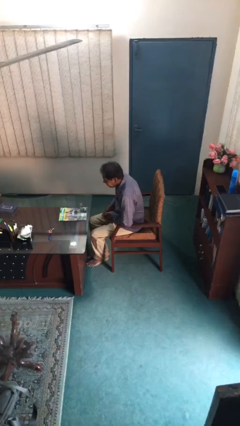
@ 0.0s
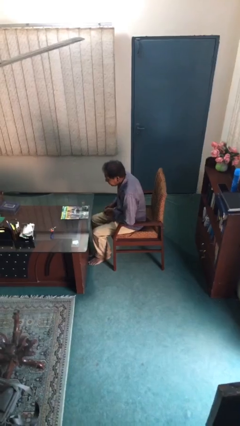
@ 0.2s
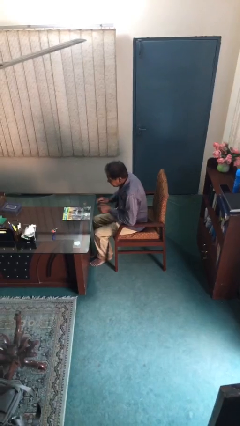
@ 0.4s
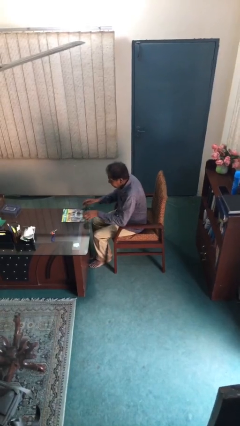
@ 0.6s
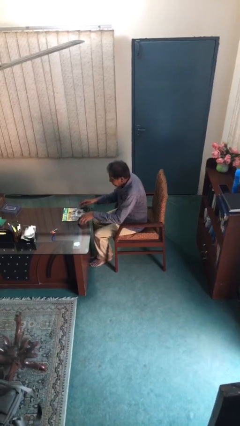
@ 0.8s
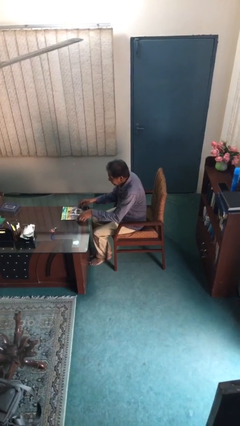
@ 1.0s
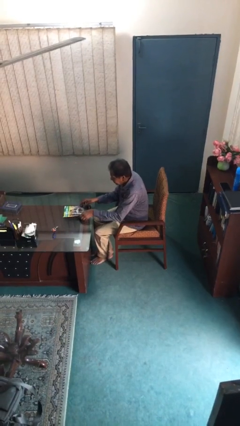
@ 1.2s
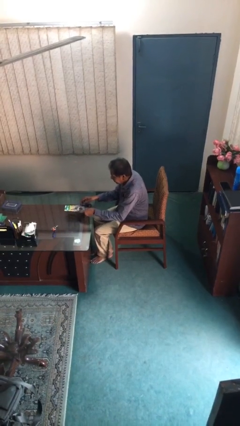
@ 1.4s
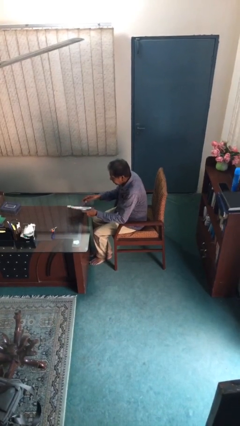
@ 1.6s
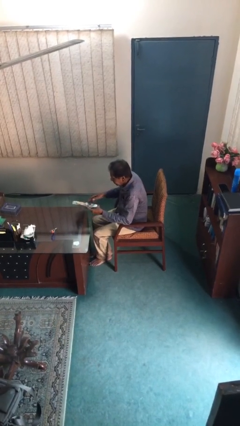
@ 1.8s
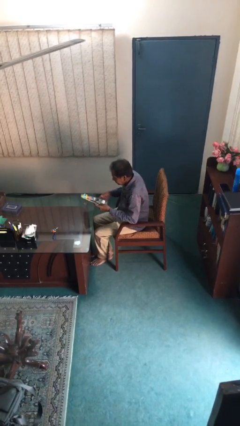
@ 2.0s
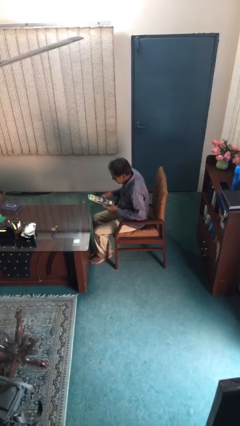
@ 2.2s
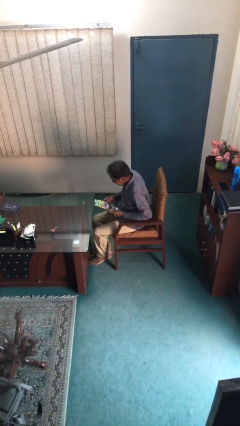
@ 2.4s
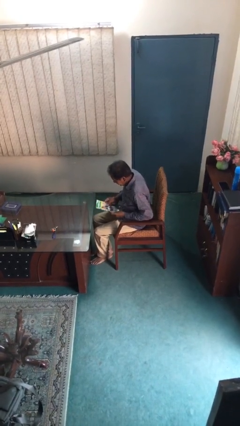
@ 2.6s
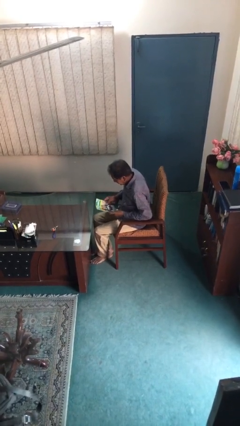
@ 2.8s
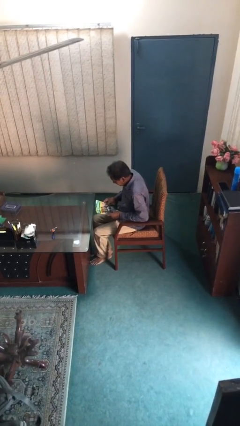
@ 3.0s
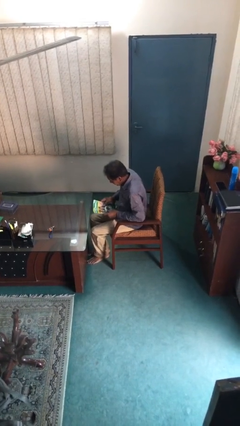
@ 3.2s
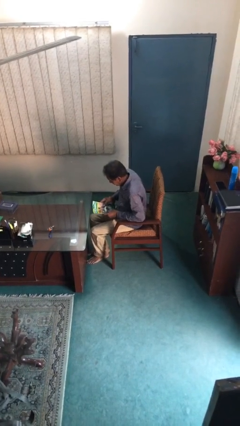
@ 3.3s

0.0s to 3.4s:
person picks up object from table

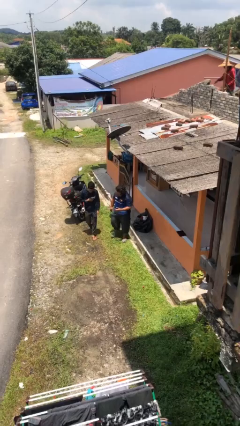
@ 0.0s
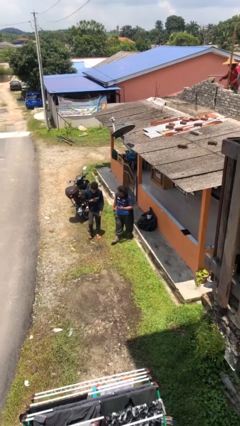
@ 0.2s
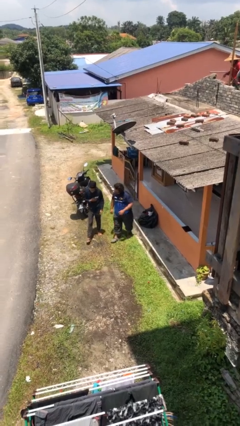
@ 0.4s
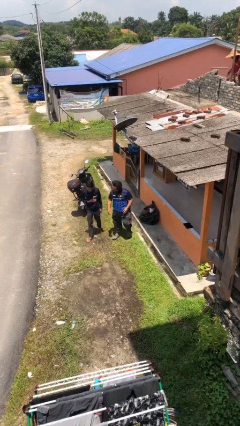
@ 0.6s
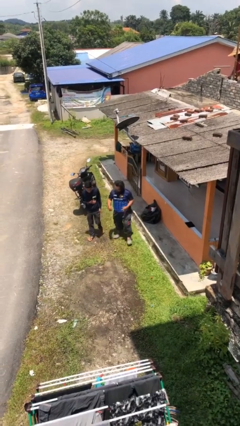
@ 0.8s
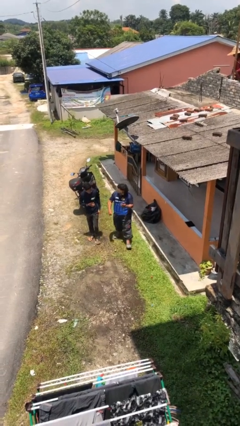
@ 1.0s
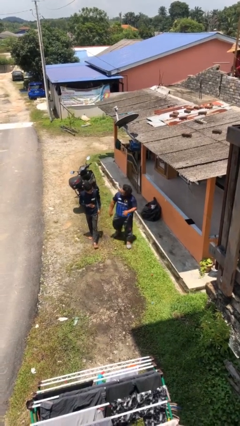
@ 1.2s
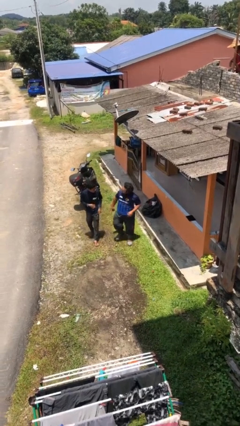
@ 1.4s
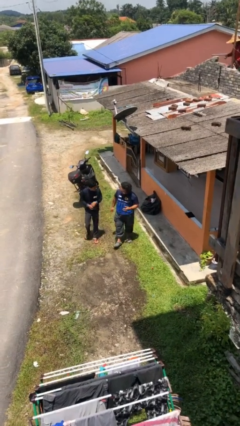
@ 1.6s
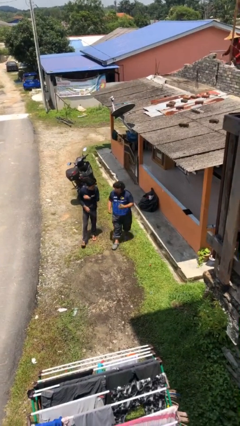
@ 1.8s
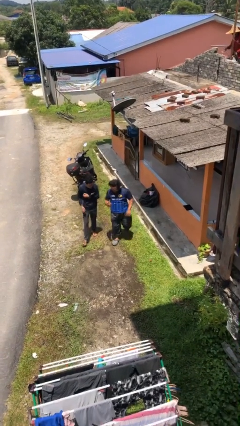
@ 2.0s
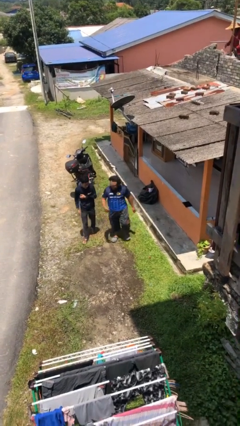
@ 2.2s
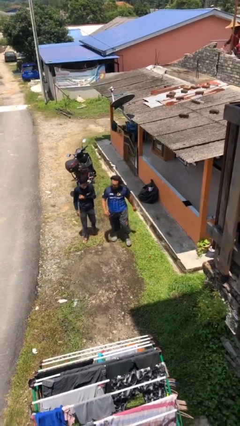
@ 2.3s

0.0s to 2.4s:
person talks to person

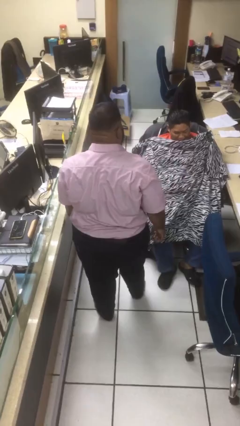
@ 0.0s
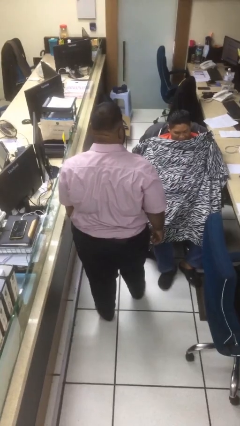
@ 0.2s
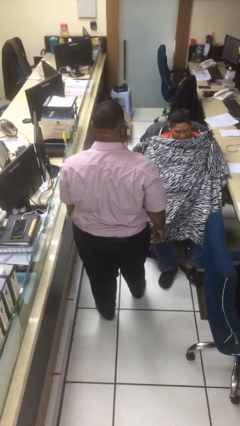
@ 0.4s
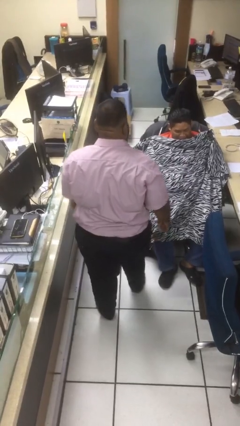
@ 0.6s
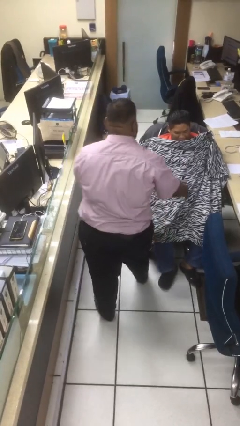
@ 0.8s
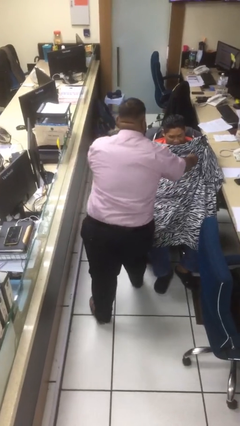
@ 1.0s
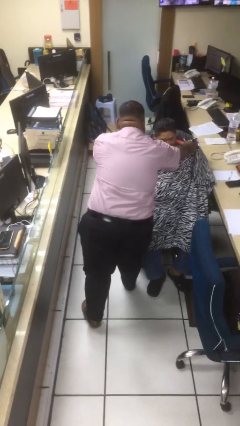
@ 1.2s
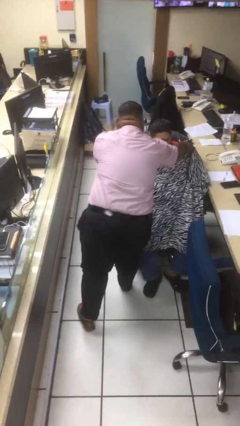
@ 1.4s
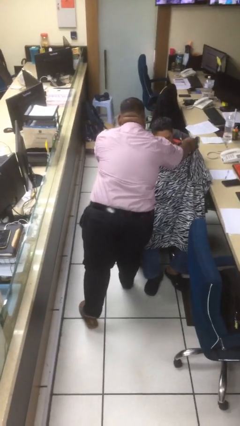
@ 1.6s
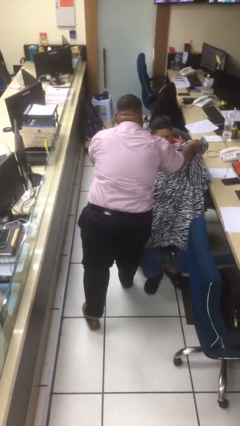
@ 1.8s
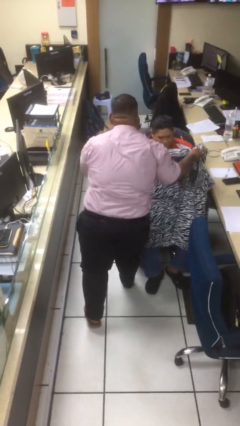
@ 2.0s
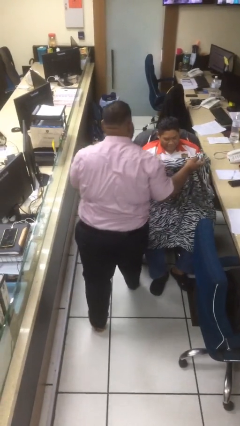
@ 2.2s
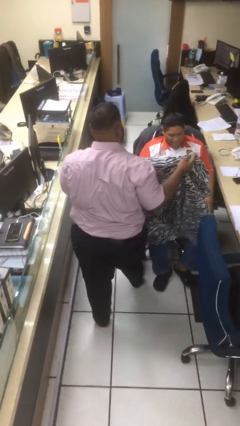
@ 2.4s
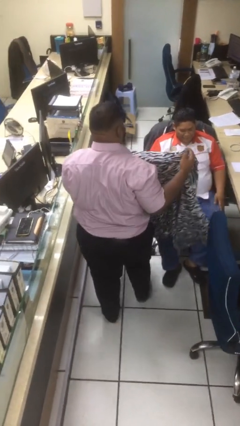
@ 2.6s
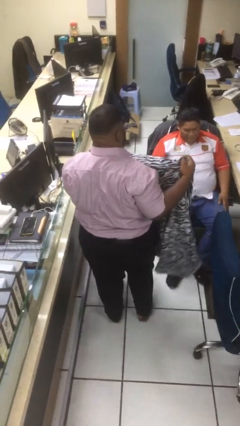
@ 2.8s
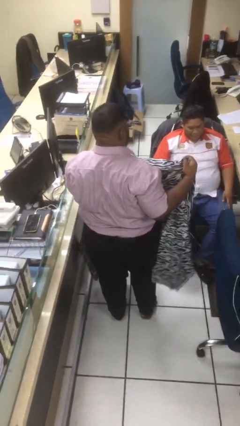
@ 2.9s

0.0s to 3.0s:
person uncovers friend with blanket

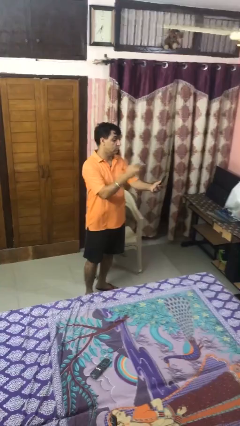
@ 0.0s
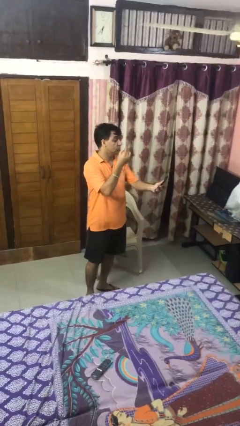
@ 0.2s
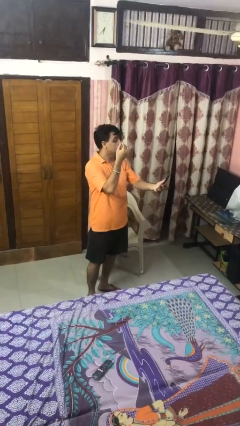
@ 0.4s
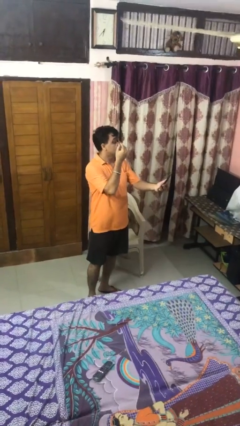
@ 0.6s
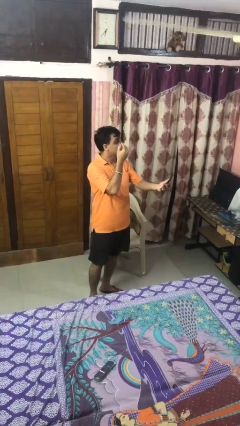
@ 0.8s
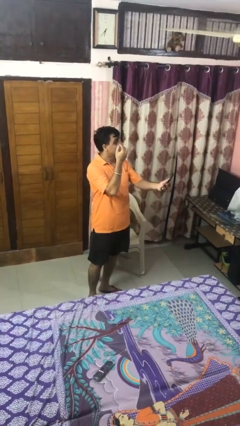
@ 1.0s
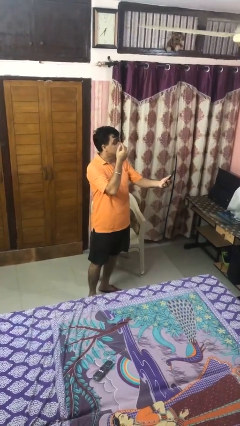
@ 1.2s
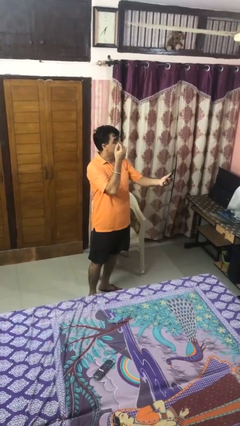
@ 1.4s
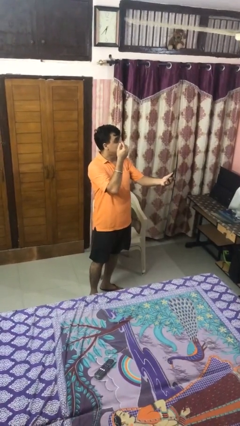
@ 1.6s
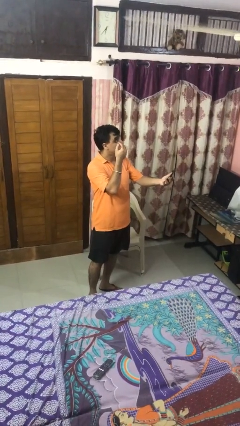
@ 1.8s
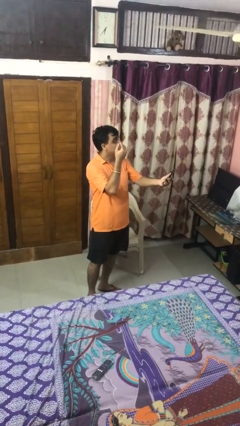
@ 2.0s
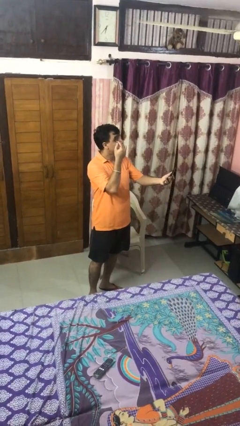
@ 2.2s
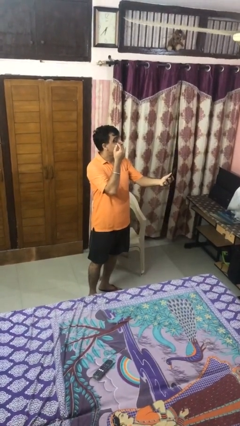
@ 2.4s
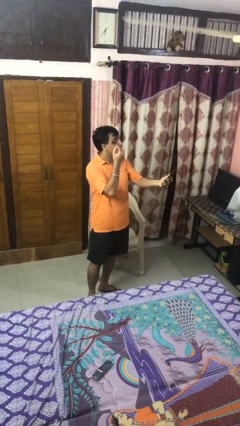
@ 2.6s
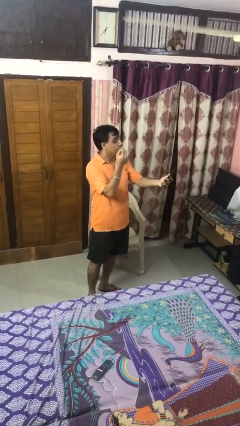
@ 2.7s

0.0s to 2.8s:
person applies eye makeup

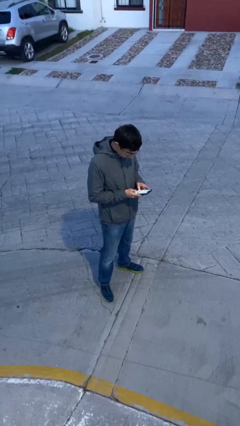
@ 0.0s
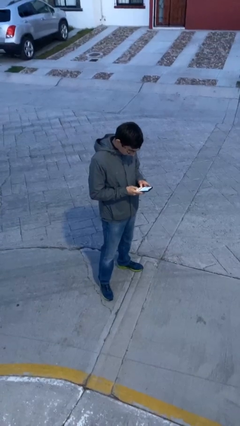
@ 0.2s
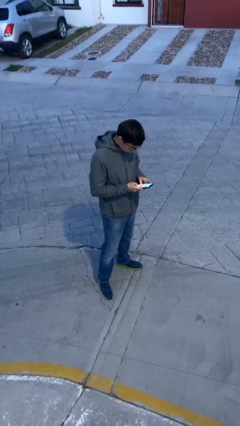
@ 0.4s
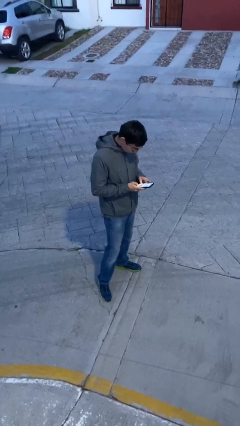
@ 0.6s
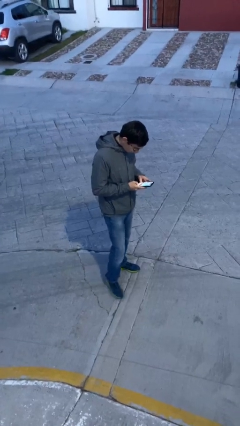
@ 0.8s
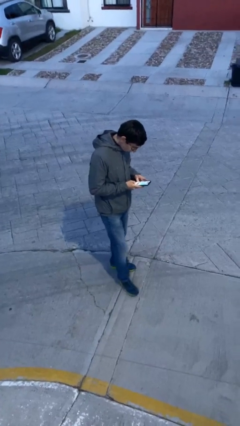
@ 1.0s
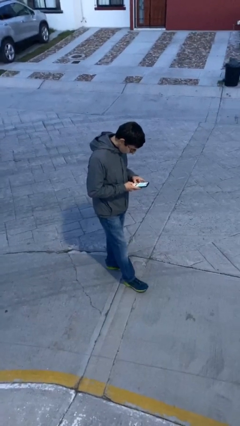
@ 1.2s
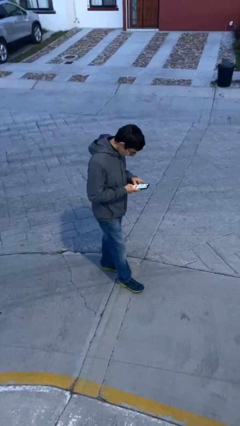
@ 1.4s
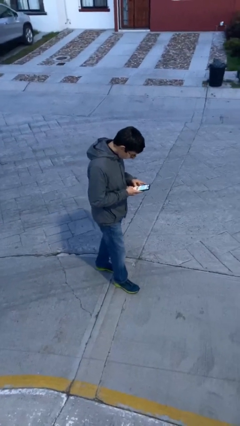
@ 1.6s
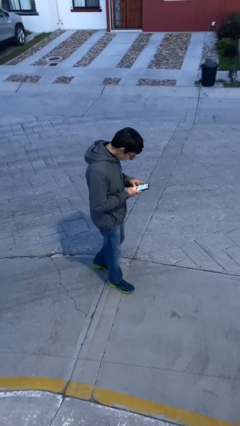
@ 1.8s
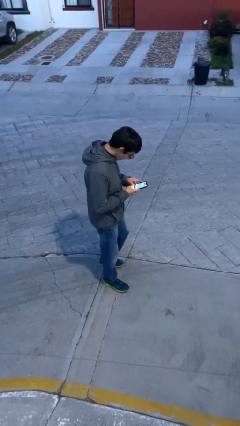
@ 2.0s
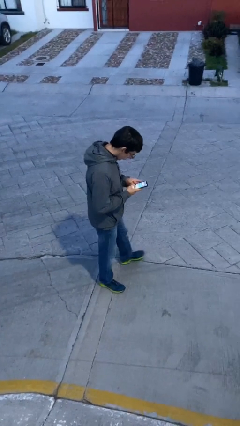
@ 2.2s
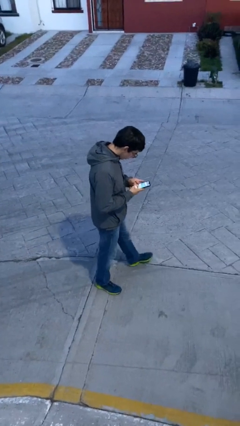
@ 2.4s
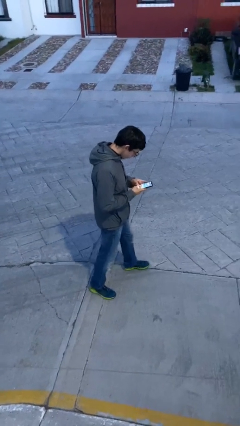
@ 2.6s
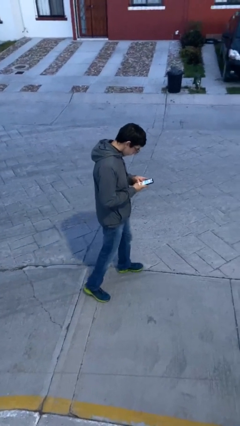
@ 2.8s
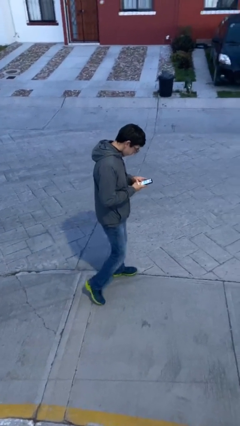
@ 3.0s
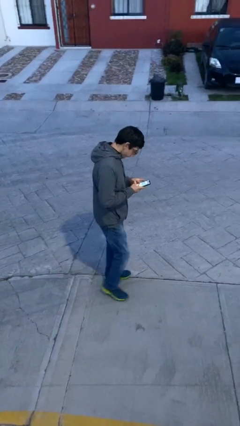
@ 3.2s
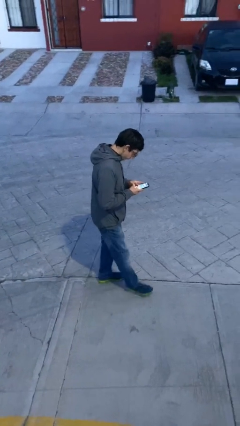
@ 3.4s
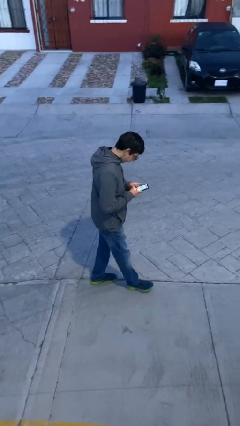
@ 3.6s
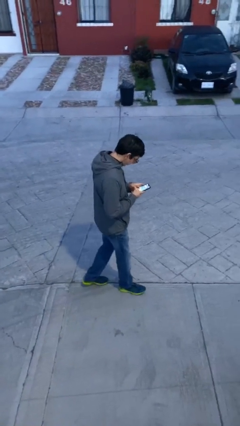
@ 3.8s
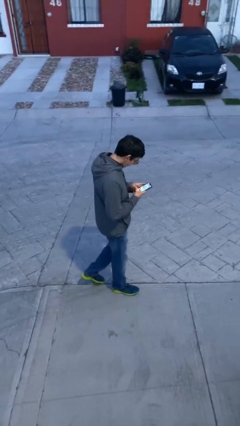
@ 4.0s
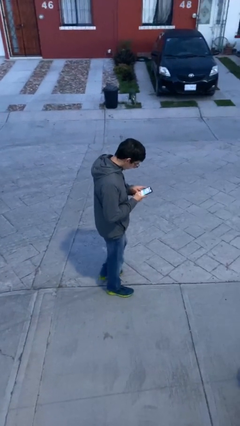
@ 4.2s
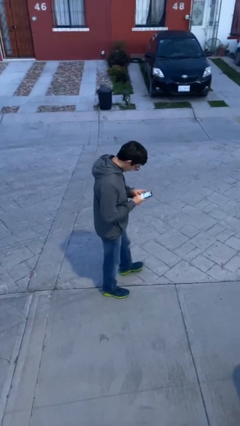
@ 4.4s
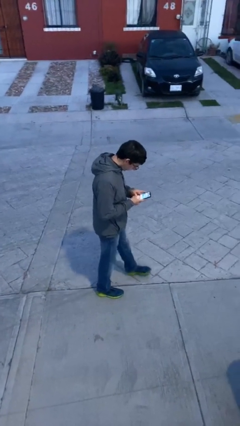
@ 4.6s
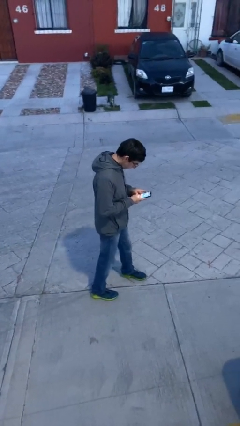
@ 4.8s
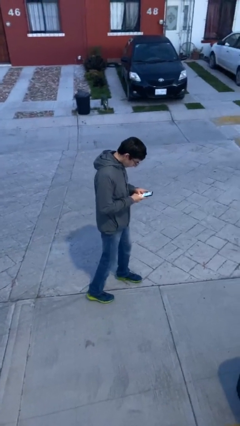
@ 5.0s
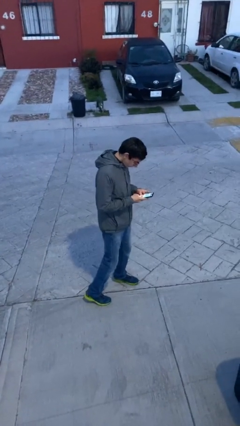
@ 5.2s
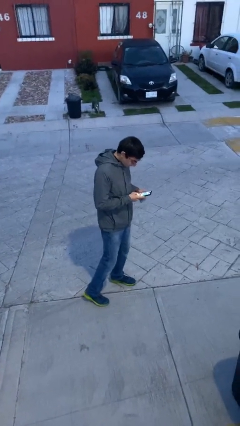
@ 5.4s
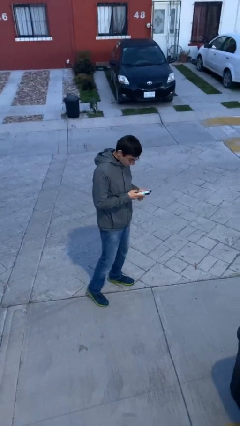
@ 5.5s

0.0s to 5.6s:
person texts on phone

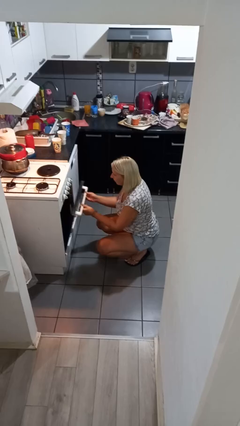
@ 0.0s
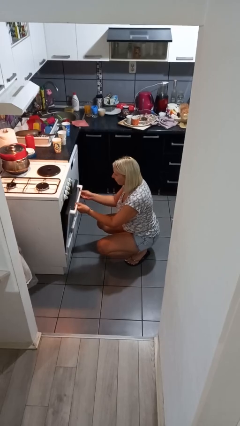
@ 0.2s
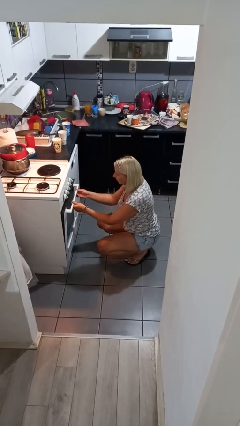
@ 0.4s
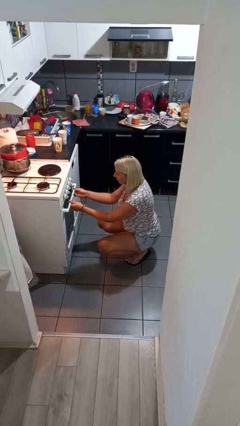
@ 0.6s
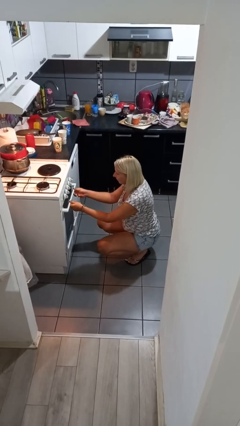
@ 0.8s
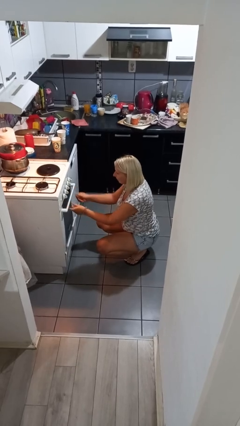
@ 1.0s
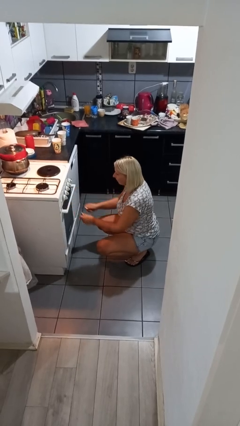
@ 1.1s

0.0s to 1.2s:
person closes oven door
